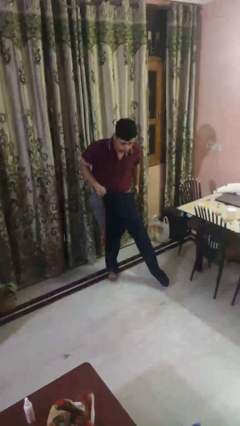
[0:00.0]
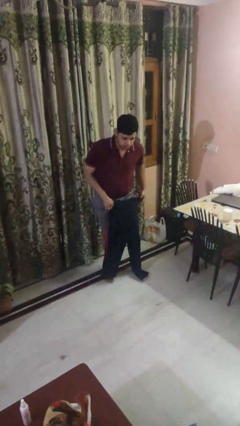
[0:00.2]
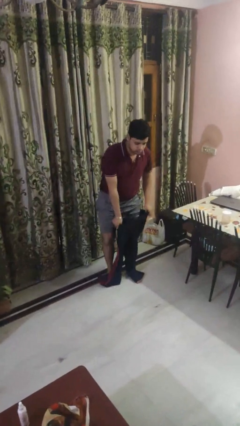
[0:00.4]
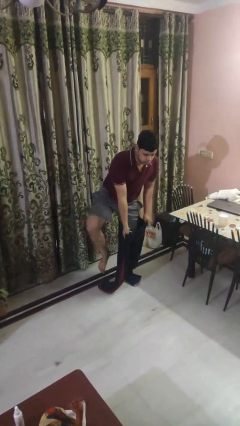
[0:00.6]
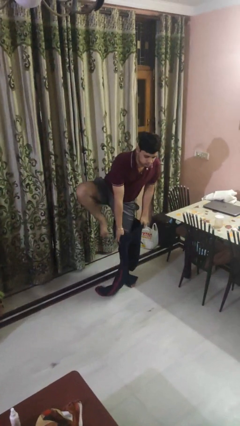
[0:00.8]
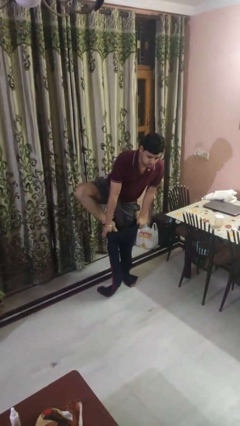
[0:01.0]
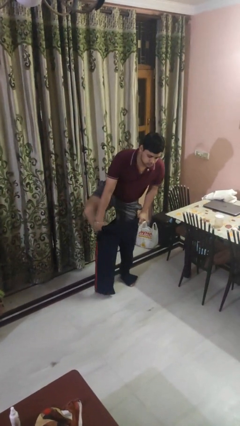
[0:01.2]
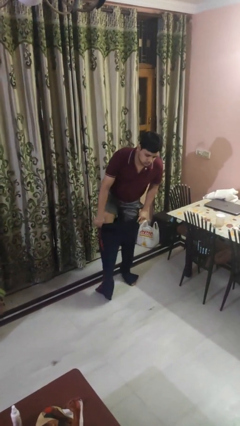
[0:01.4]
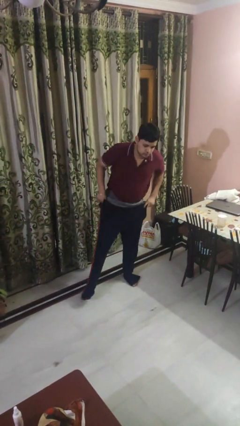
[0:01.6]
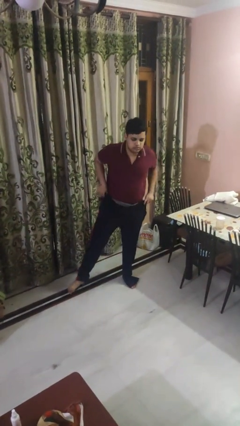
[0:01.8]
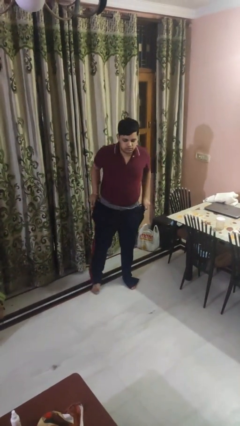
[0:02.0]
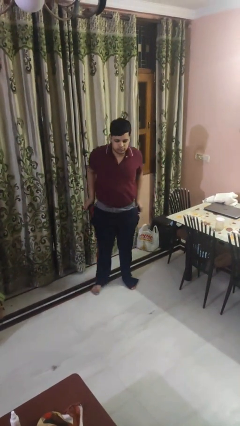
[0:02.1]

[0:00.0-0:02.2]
person puts on pants

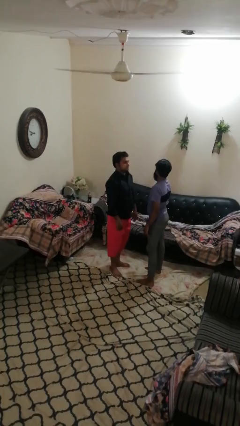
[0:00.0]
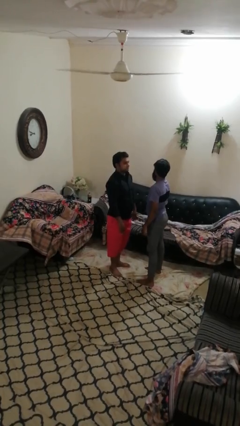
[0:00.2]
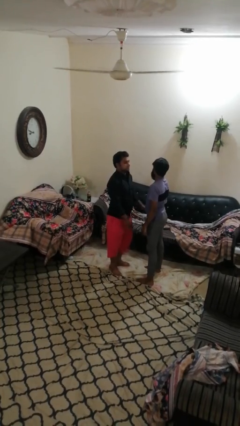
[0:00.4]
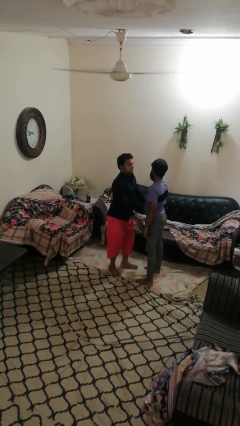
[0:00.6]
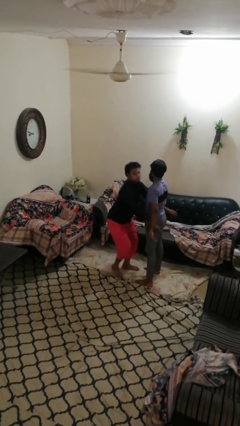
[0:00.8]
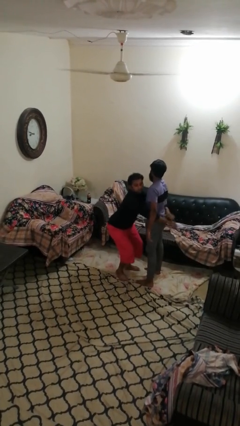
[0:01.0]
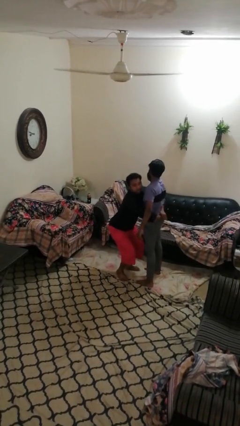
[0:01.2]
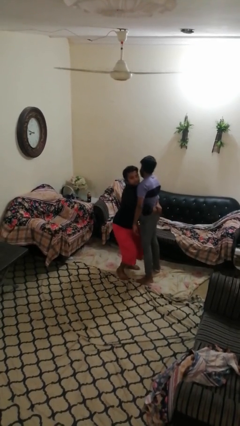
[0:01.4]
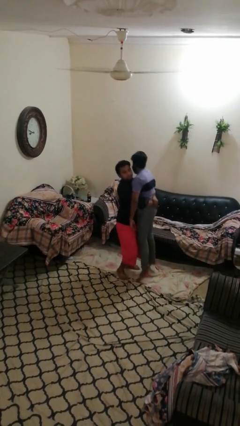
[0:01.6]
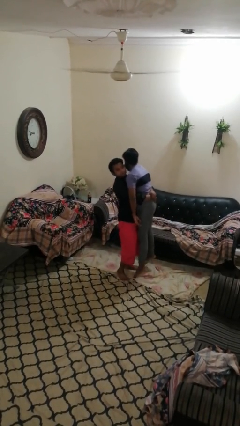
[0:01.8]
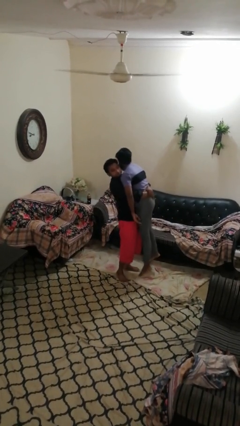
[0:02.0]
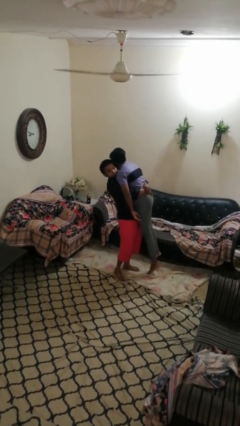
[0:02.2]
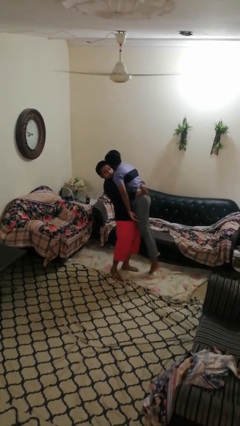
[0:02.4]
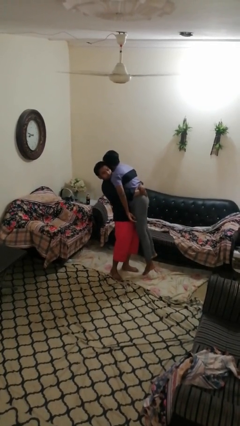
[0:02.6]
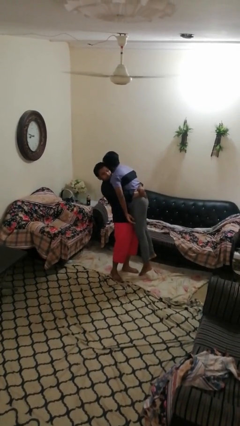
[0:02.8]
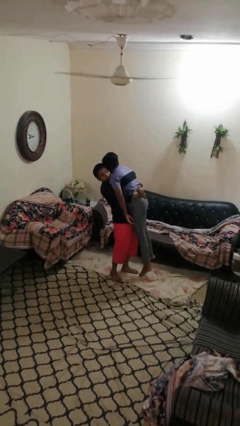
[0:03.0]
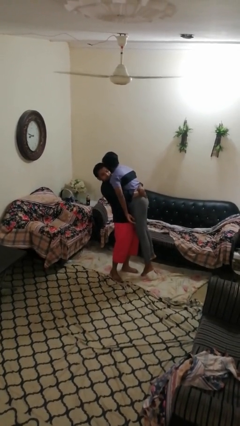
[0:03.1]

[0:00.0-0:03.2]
person picks up person

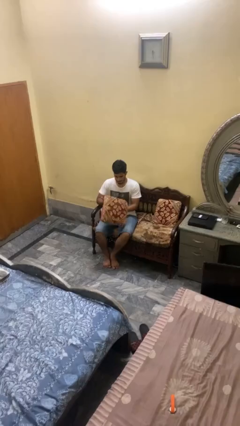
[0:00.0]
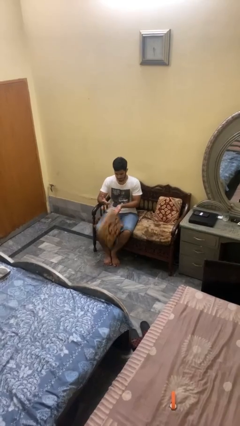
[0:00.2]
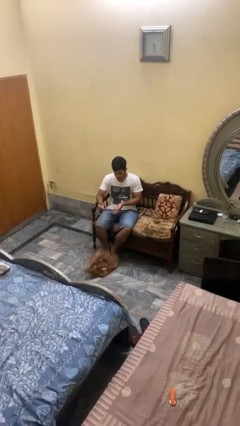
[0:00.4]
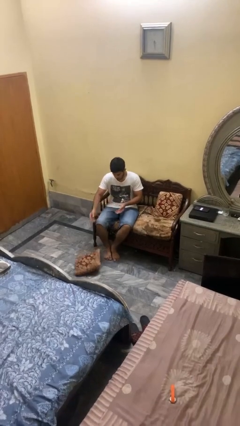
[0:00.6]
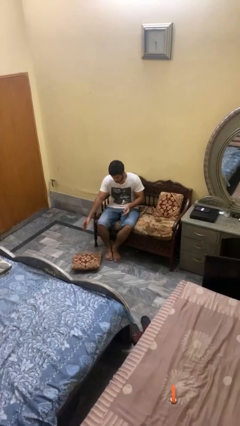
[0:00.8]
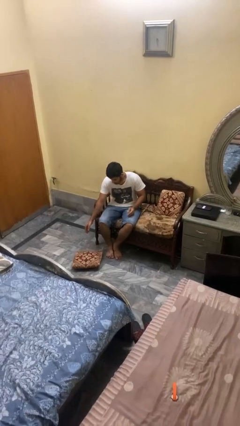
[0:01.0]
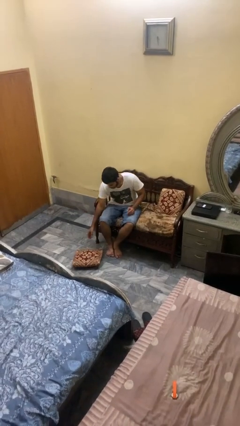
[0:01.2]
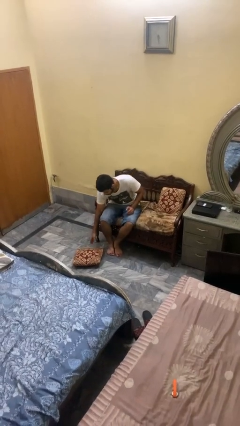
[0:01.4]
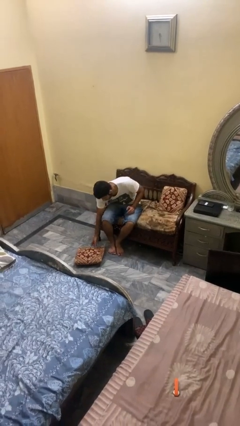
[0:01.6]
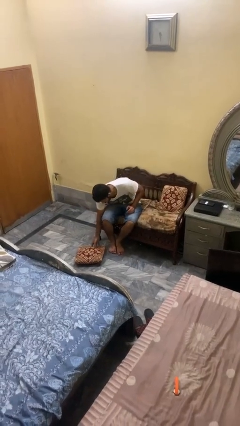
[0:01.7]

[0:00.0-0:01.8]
person drops object

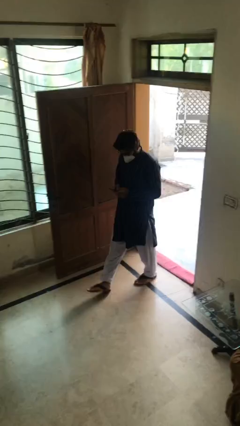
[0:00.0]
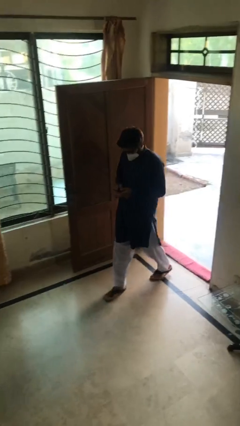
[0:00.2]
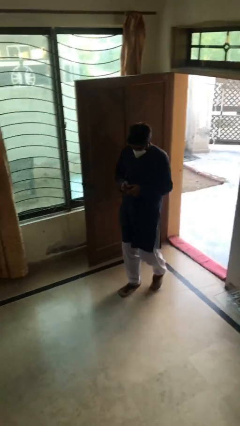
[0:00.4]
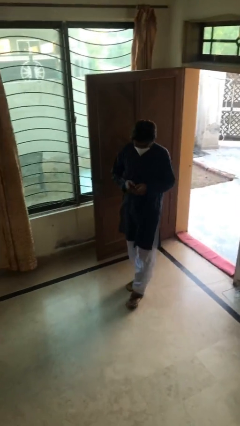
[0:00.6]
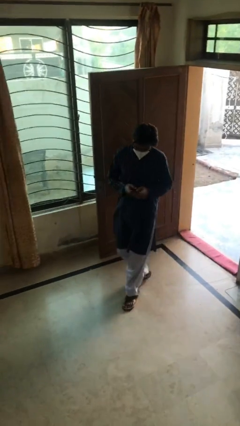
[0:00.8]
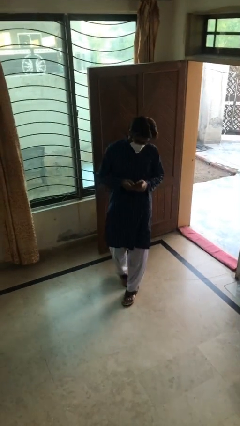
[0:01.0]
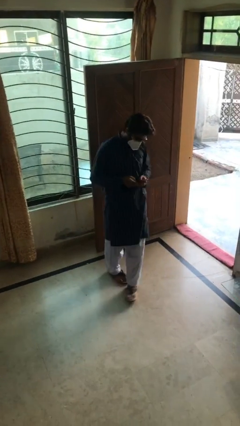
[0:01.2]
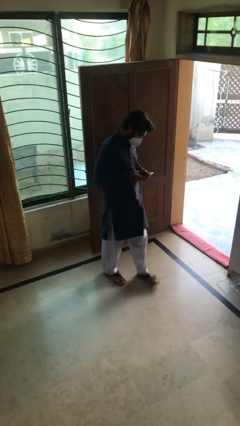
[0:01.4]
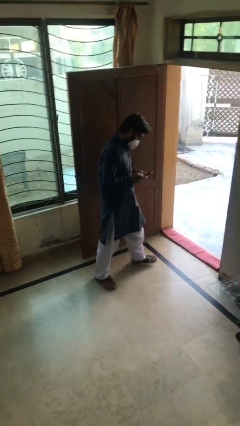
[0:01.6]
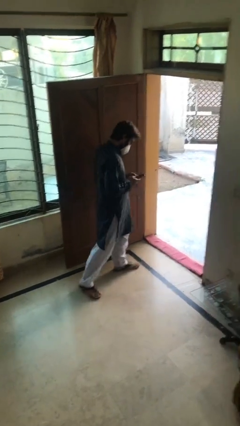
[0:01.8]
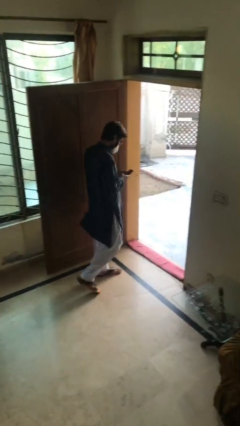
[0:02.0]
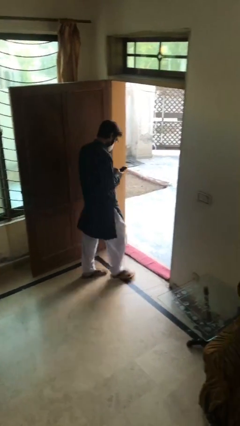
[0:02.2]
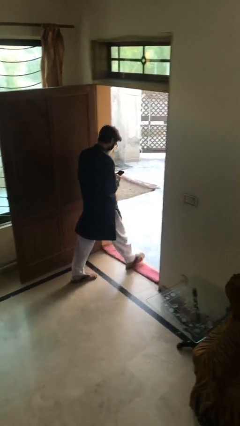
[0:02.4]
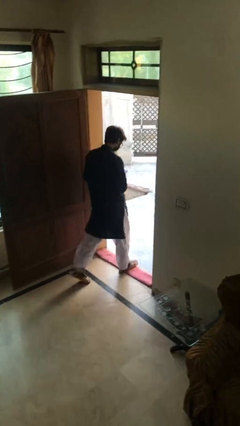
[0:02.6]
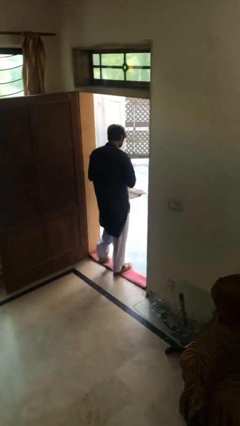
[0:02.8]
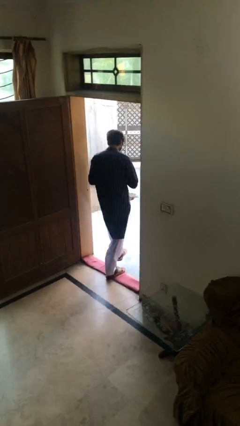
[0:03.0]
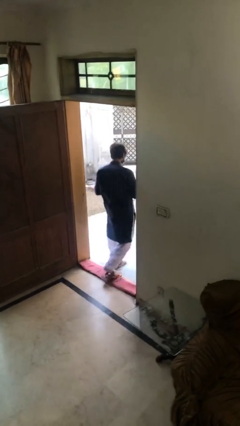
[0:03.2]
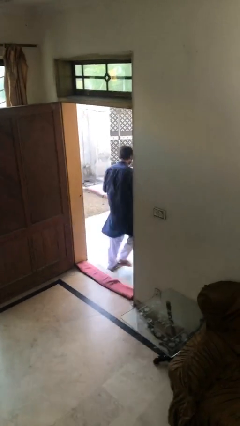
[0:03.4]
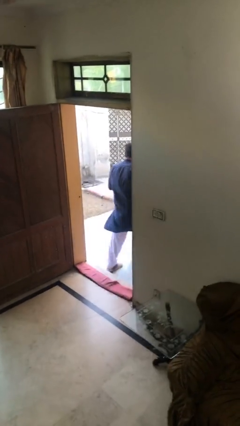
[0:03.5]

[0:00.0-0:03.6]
person exits scene through structure

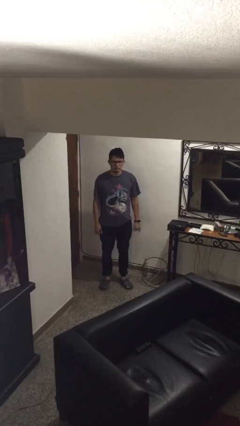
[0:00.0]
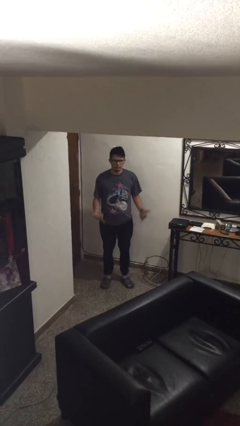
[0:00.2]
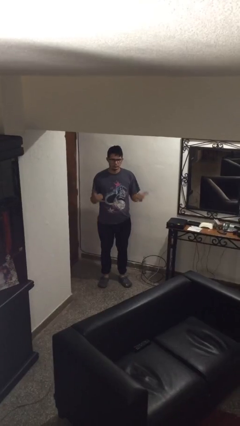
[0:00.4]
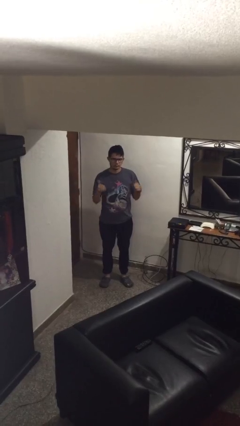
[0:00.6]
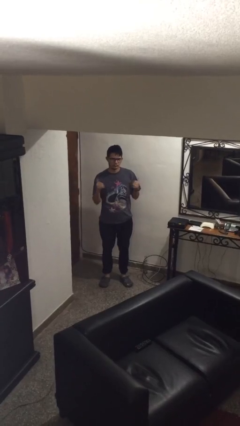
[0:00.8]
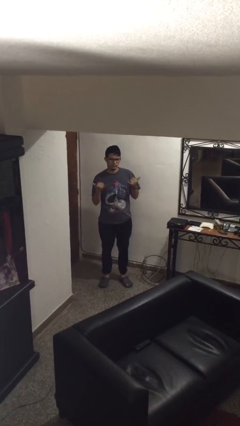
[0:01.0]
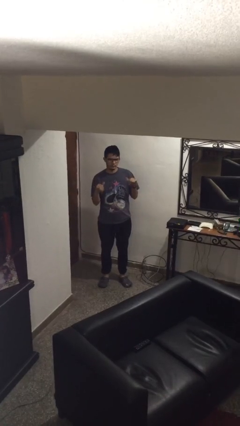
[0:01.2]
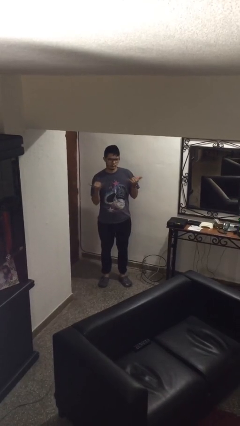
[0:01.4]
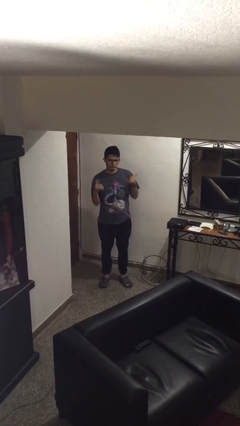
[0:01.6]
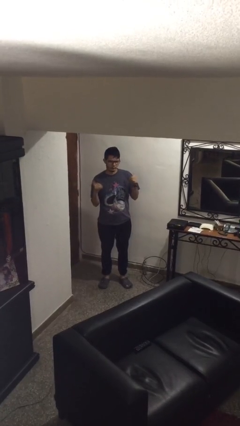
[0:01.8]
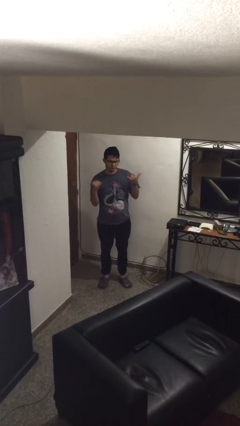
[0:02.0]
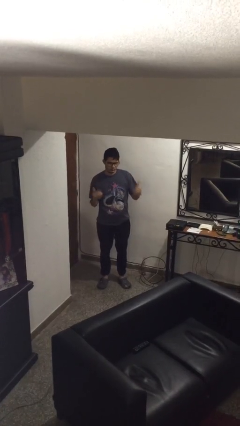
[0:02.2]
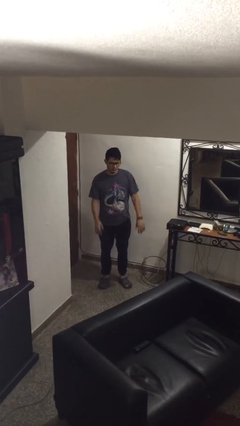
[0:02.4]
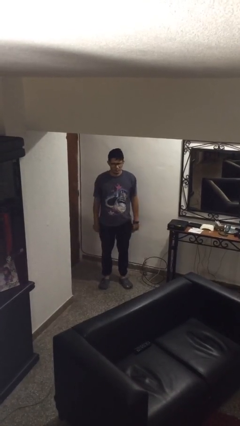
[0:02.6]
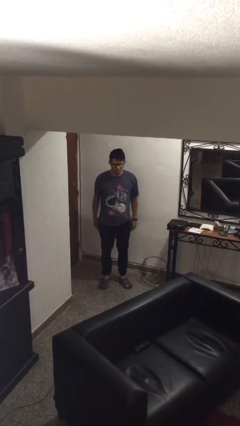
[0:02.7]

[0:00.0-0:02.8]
person gestures hang loose

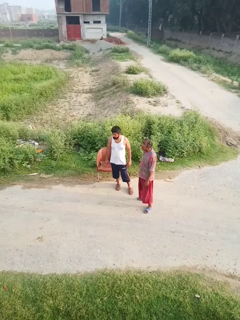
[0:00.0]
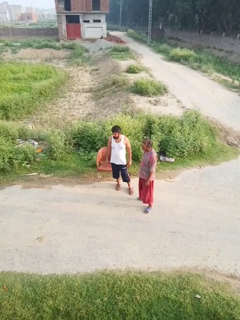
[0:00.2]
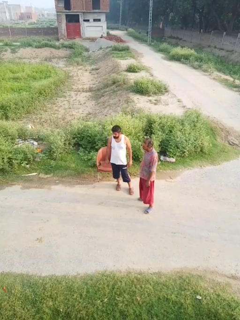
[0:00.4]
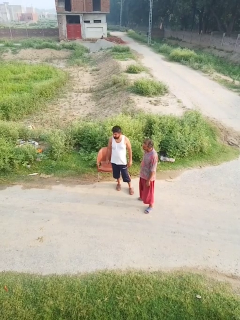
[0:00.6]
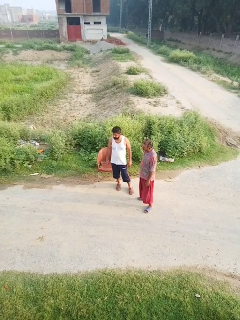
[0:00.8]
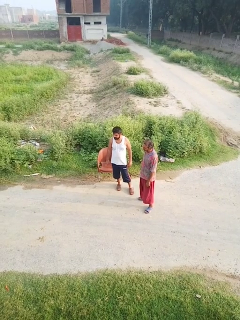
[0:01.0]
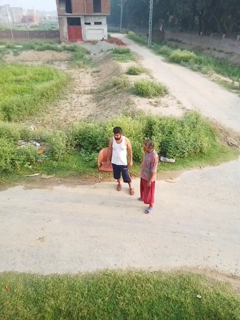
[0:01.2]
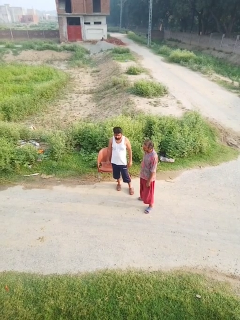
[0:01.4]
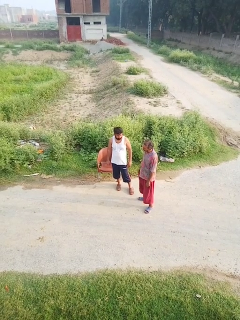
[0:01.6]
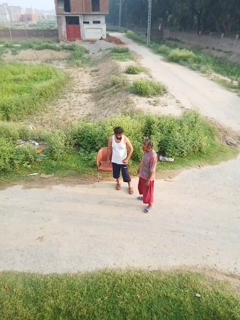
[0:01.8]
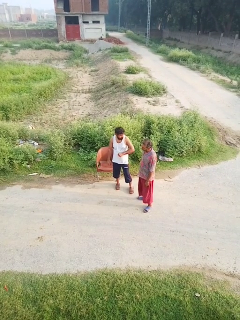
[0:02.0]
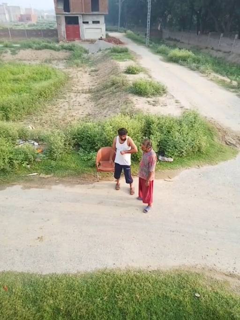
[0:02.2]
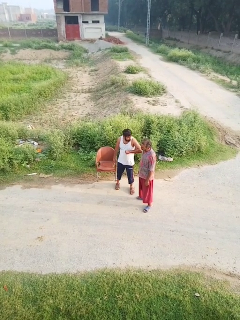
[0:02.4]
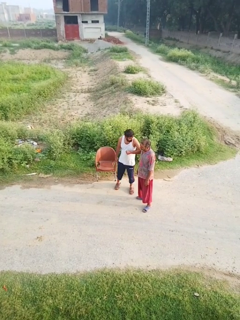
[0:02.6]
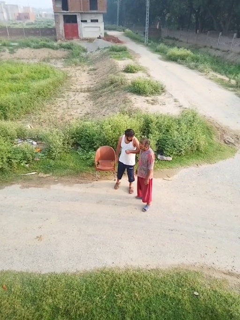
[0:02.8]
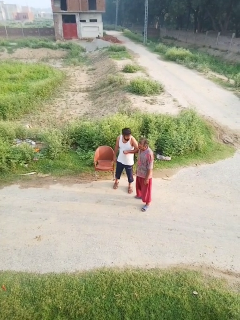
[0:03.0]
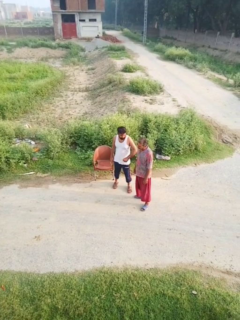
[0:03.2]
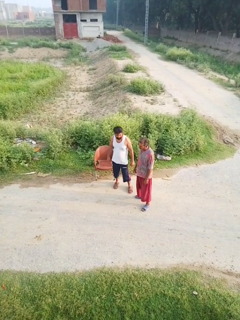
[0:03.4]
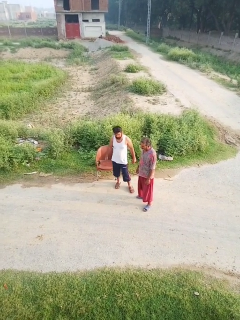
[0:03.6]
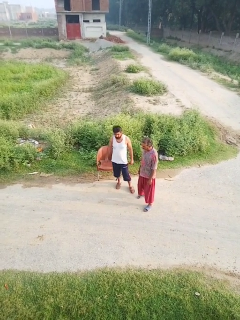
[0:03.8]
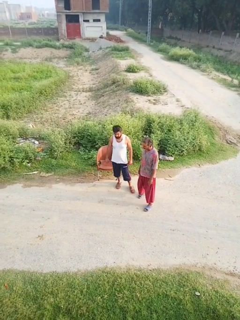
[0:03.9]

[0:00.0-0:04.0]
person nudges person with elbow

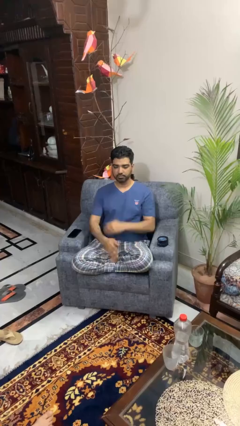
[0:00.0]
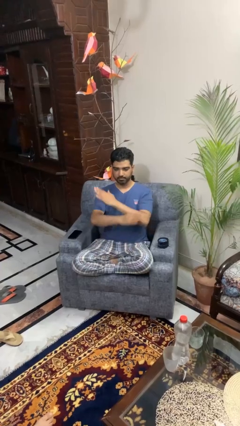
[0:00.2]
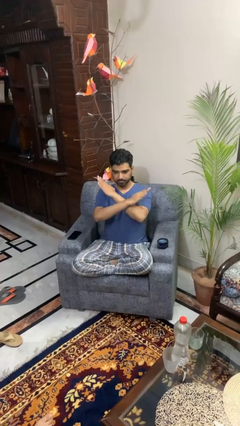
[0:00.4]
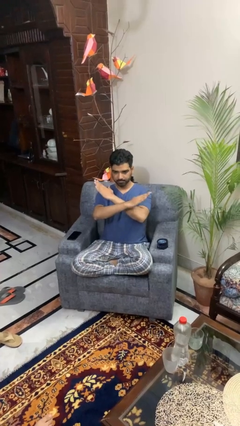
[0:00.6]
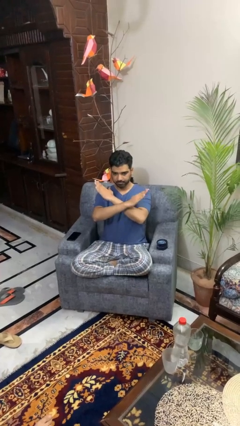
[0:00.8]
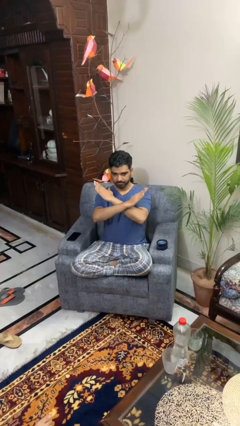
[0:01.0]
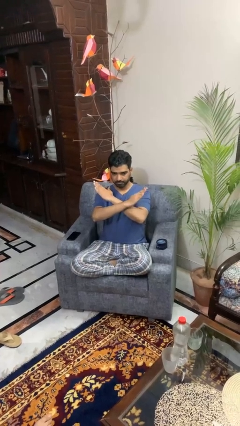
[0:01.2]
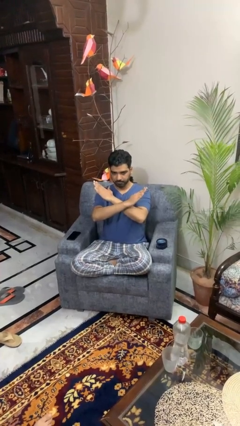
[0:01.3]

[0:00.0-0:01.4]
person gestures arms x
